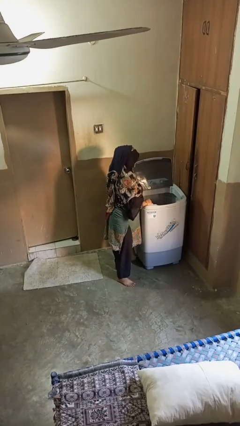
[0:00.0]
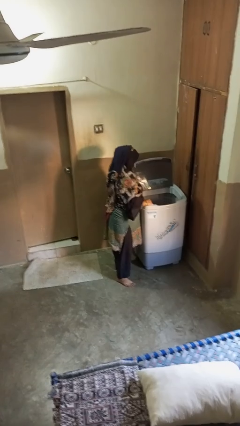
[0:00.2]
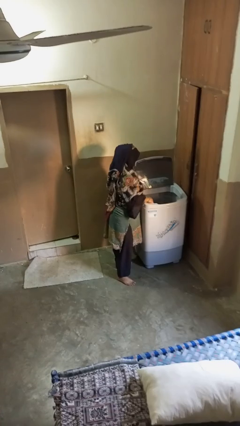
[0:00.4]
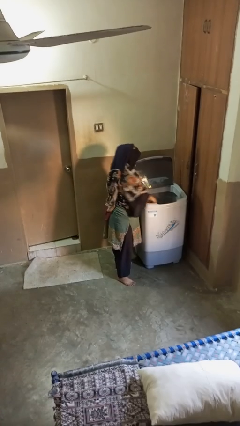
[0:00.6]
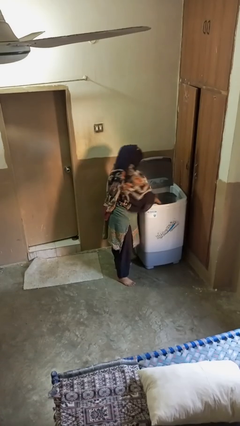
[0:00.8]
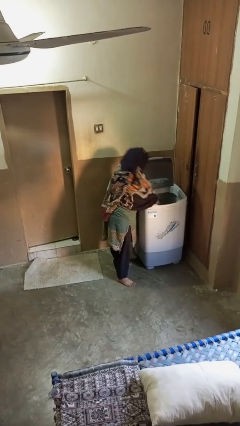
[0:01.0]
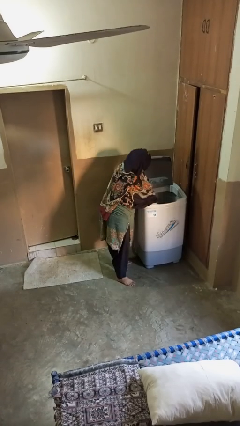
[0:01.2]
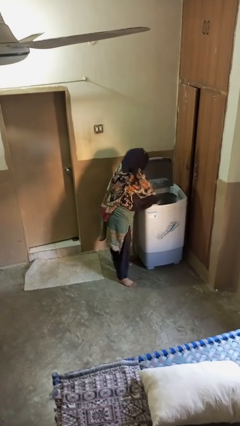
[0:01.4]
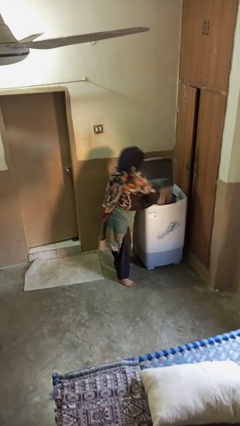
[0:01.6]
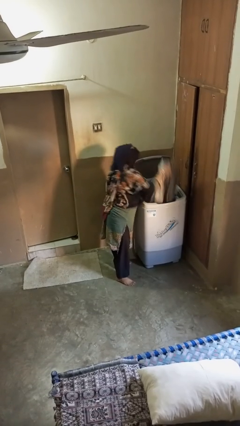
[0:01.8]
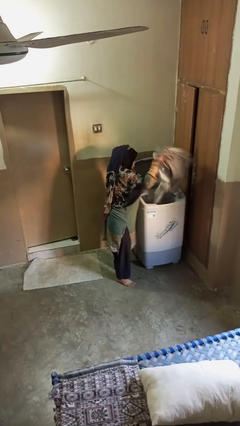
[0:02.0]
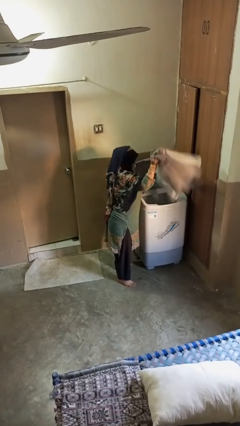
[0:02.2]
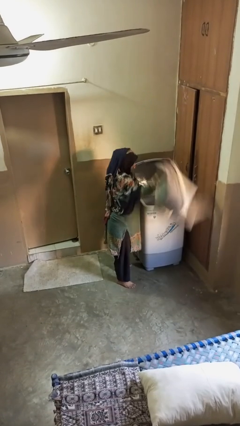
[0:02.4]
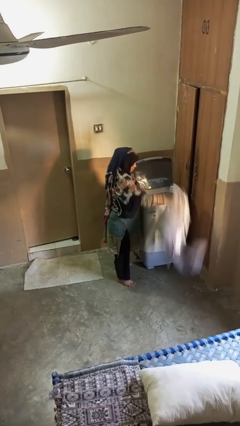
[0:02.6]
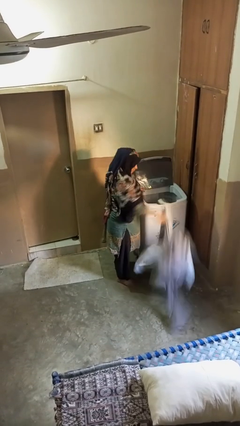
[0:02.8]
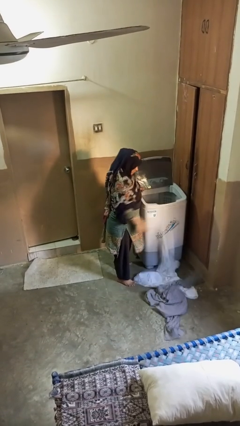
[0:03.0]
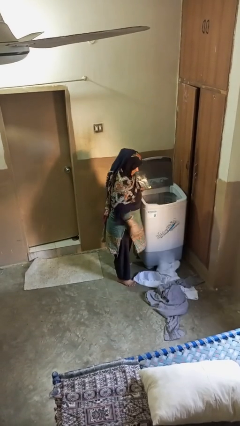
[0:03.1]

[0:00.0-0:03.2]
person unloads clotheswasher

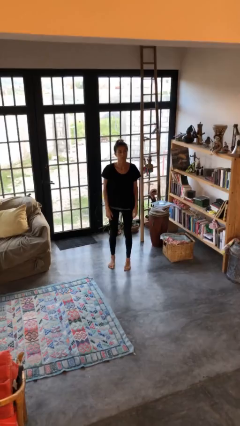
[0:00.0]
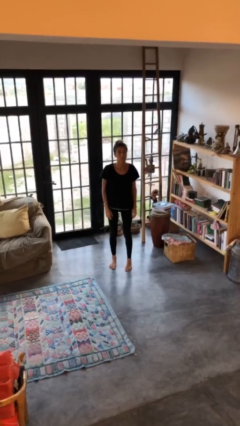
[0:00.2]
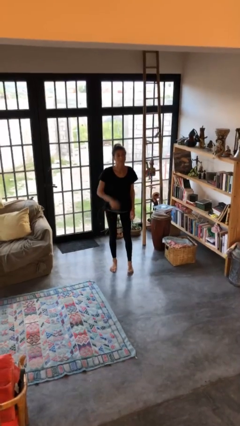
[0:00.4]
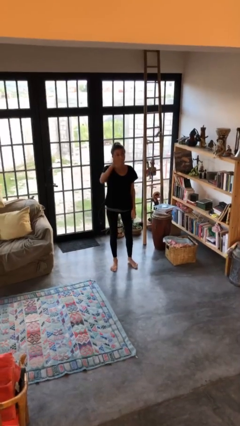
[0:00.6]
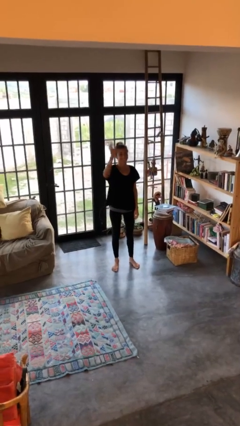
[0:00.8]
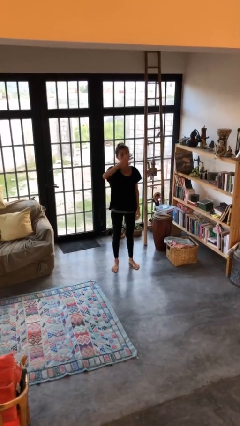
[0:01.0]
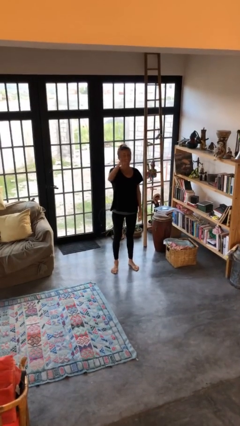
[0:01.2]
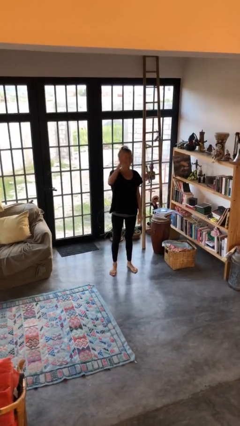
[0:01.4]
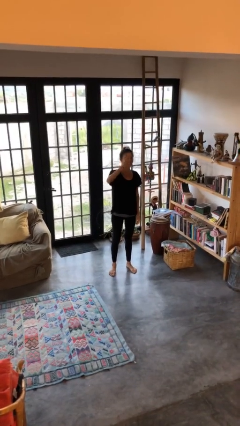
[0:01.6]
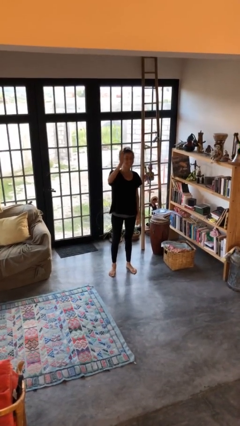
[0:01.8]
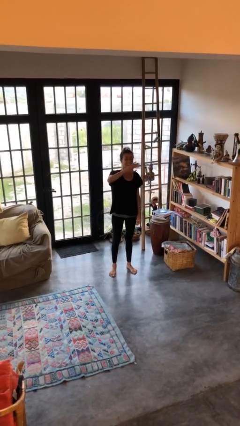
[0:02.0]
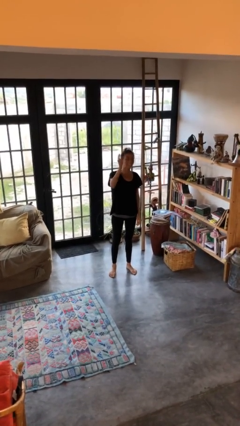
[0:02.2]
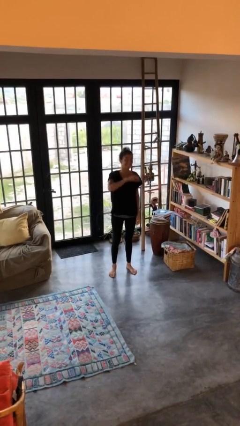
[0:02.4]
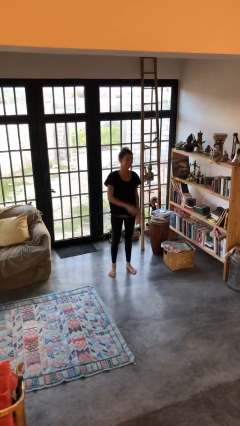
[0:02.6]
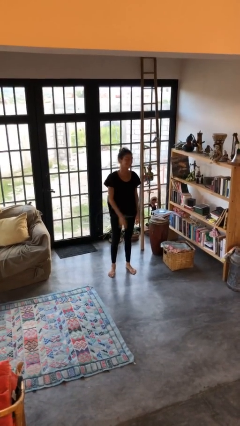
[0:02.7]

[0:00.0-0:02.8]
person waves at person

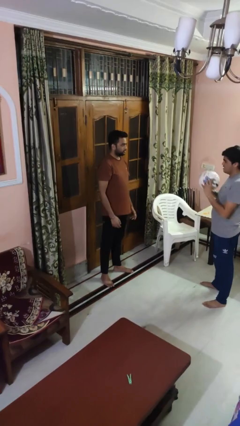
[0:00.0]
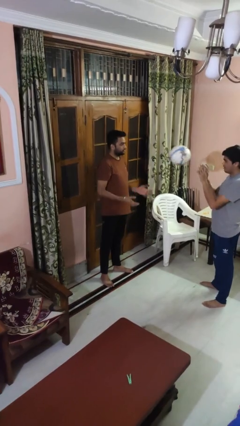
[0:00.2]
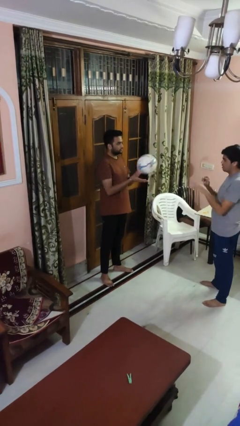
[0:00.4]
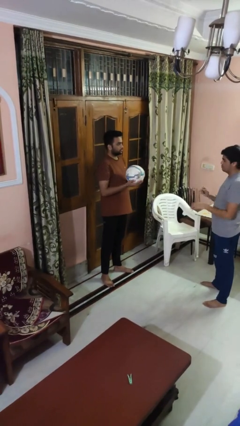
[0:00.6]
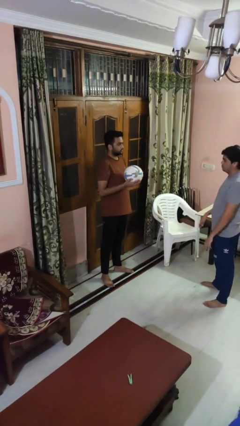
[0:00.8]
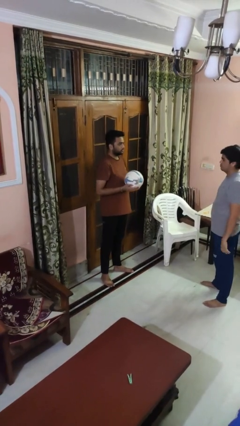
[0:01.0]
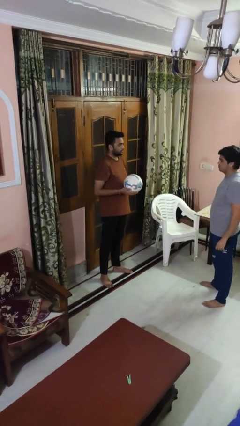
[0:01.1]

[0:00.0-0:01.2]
person catches object from person

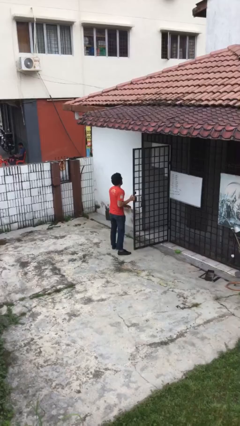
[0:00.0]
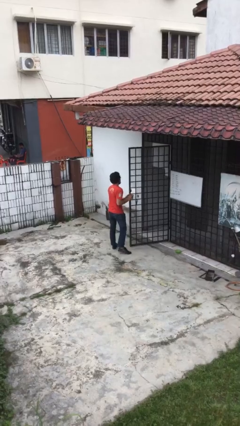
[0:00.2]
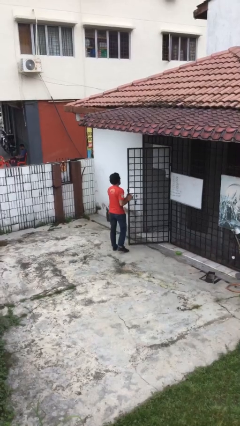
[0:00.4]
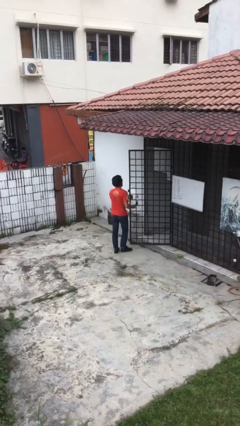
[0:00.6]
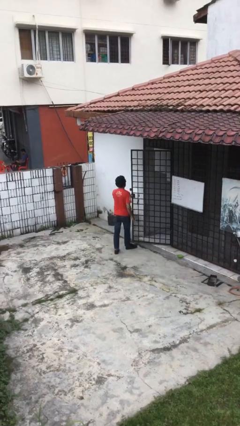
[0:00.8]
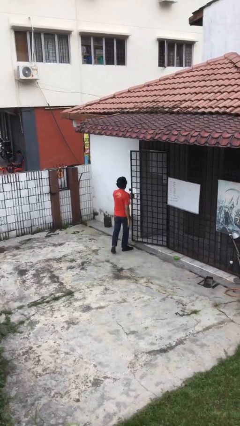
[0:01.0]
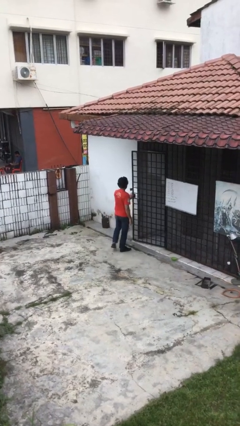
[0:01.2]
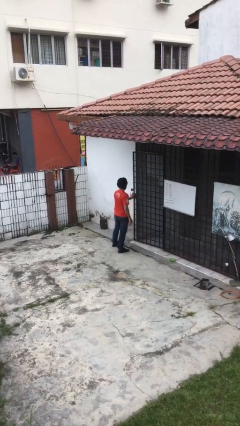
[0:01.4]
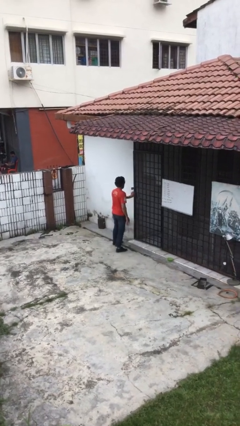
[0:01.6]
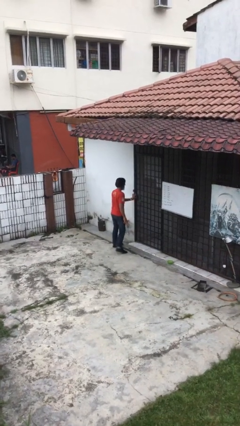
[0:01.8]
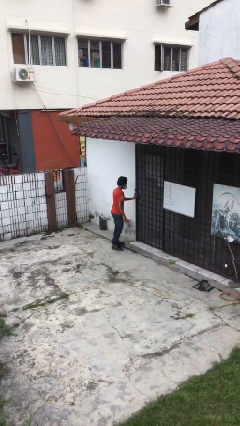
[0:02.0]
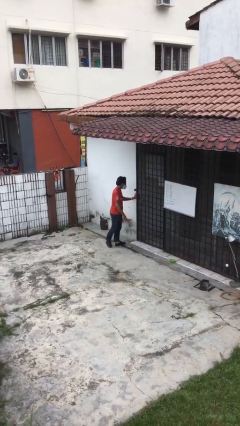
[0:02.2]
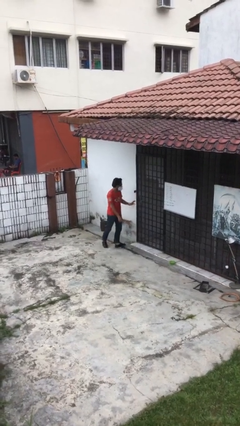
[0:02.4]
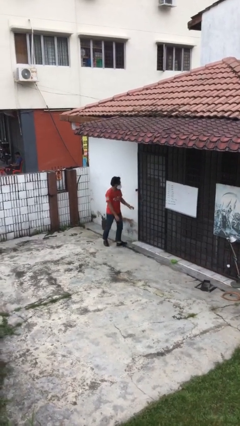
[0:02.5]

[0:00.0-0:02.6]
person closes facility door

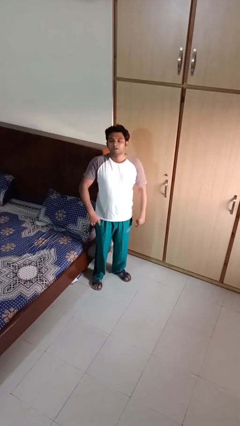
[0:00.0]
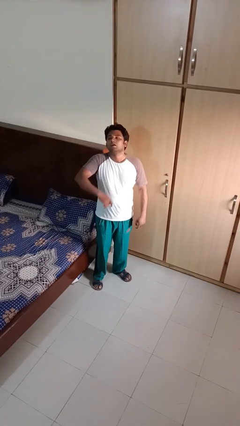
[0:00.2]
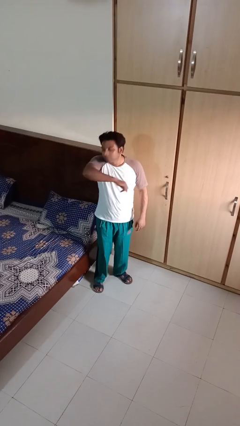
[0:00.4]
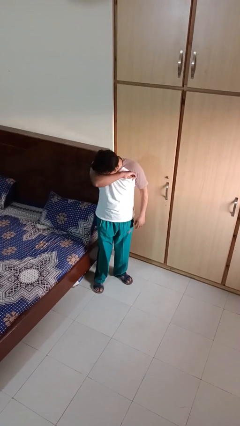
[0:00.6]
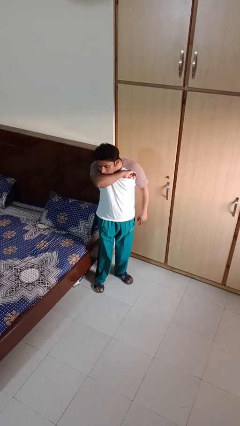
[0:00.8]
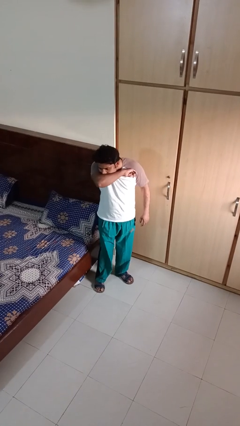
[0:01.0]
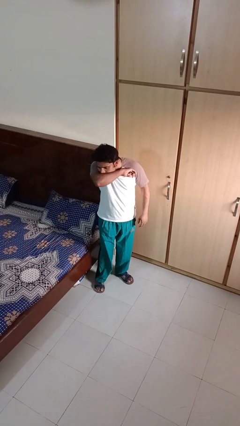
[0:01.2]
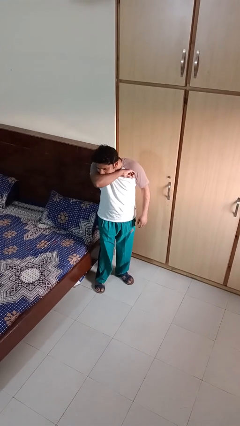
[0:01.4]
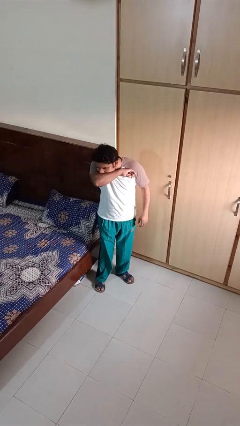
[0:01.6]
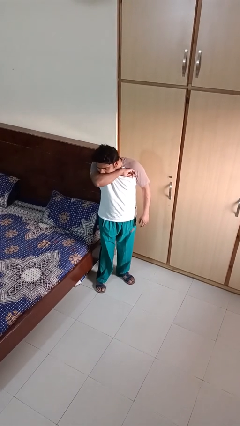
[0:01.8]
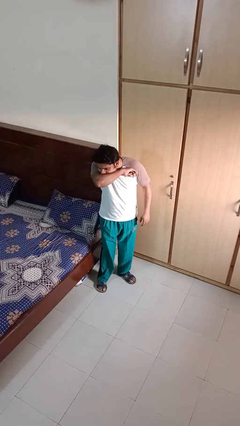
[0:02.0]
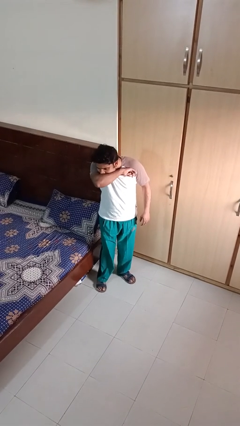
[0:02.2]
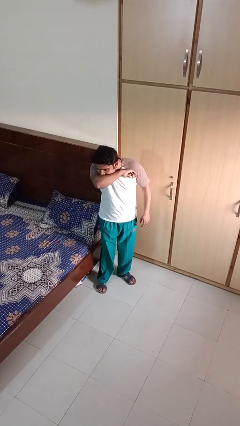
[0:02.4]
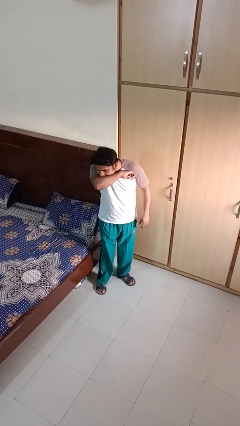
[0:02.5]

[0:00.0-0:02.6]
person sneezes into arm

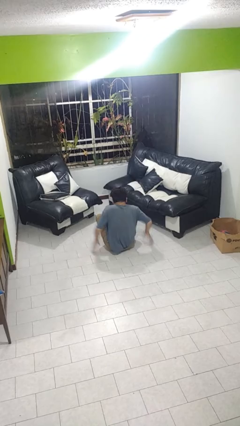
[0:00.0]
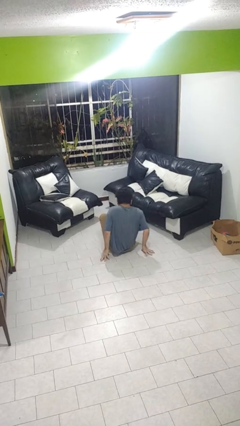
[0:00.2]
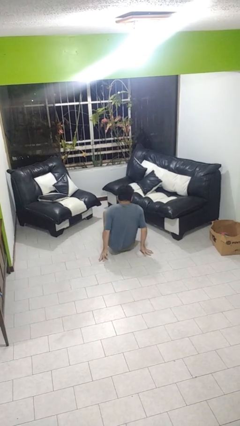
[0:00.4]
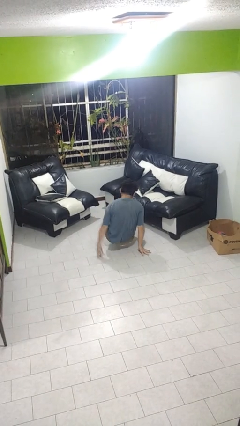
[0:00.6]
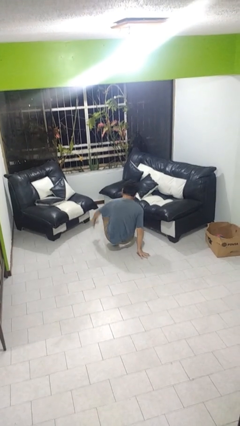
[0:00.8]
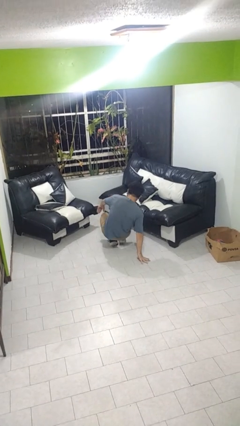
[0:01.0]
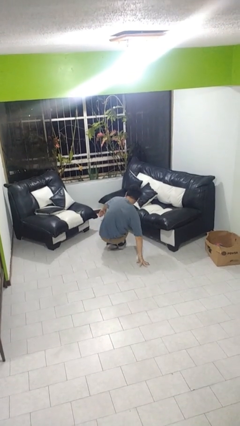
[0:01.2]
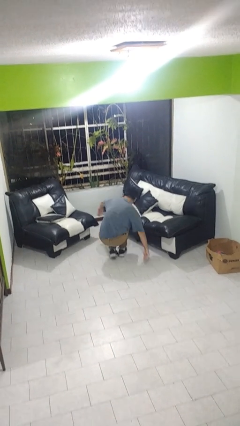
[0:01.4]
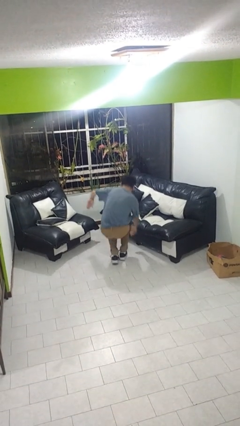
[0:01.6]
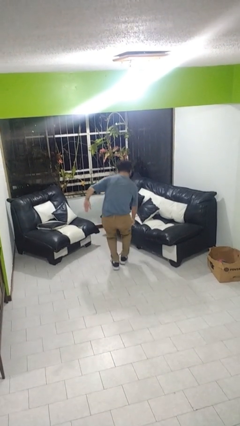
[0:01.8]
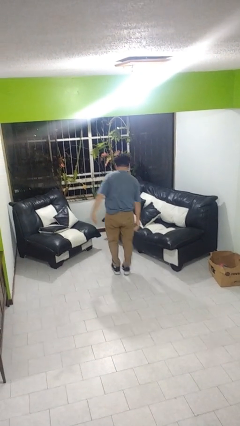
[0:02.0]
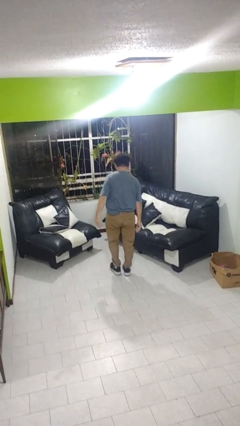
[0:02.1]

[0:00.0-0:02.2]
person stands up from floor

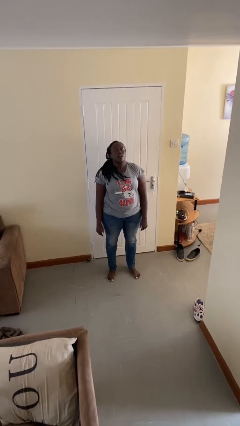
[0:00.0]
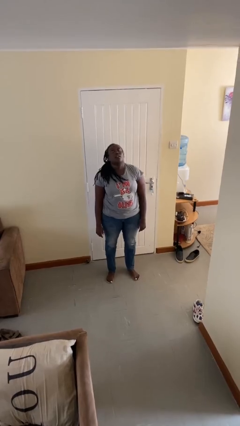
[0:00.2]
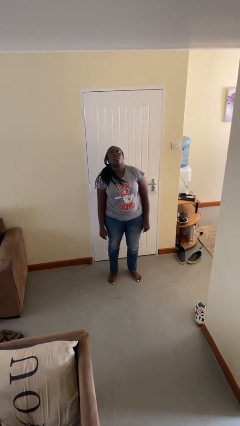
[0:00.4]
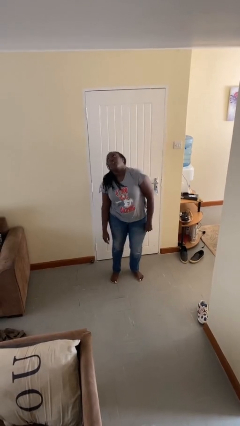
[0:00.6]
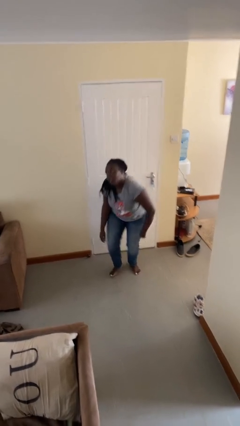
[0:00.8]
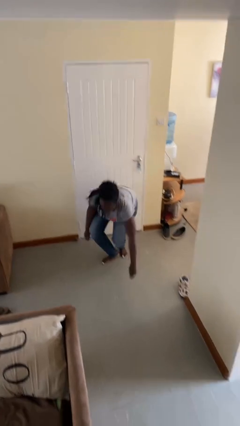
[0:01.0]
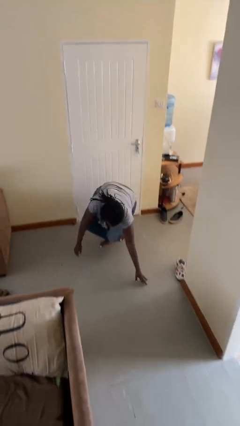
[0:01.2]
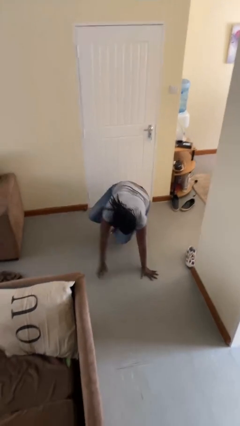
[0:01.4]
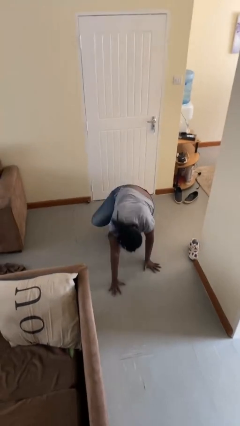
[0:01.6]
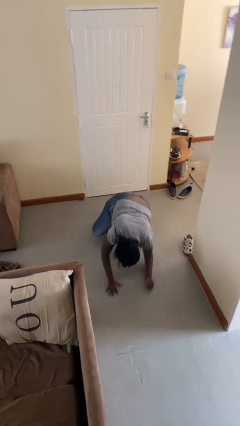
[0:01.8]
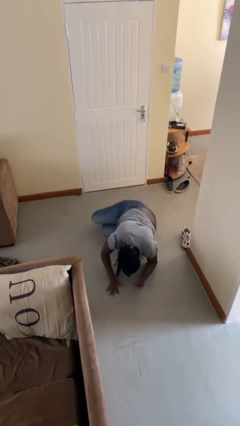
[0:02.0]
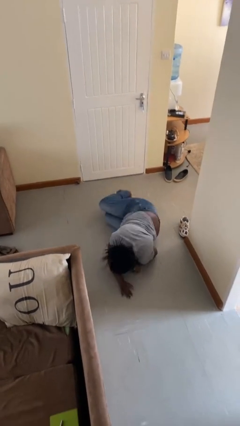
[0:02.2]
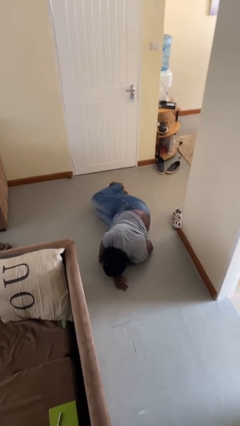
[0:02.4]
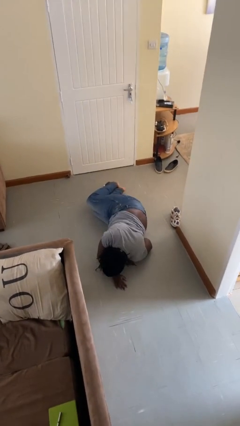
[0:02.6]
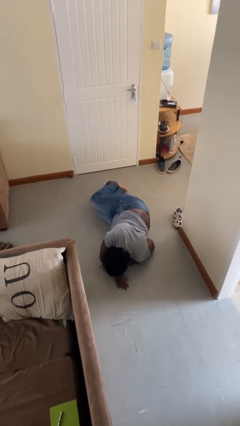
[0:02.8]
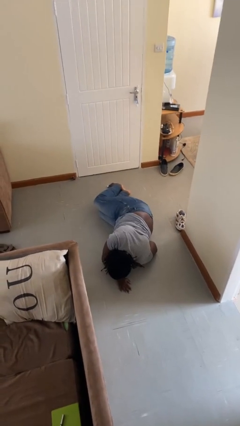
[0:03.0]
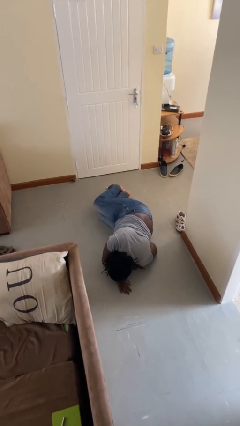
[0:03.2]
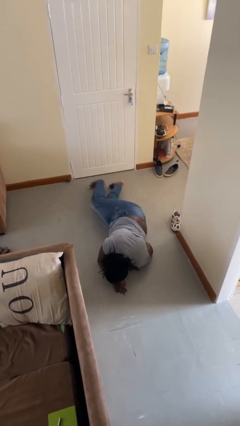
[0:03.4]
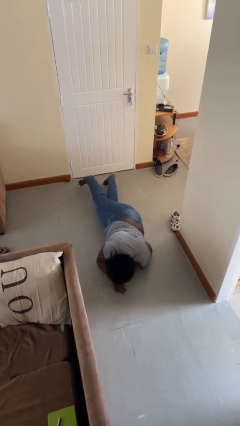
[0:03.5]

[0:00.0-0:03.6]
person falls while standing
